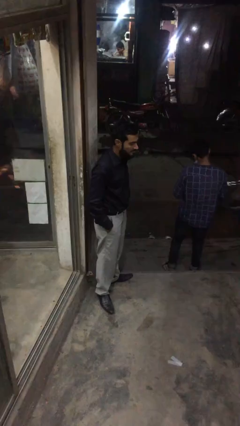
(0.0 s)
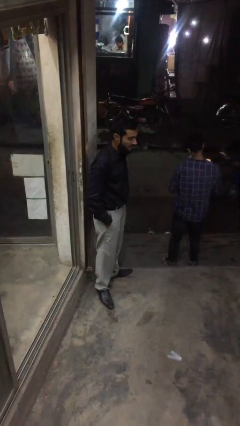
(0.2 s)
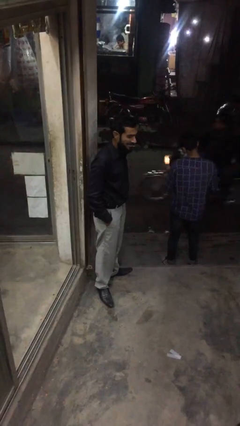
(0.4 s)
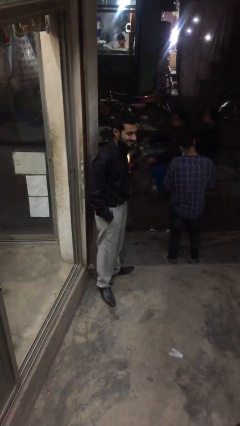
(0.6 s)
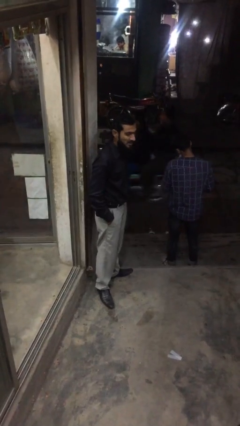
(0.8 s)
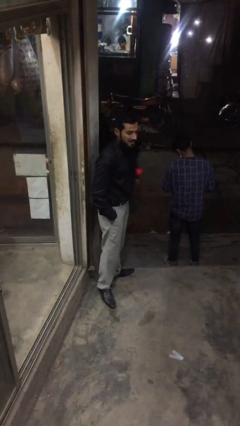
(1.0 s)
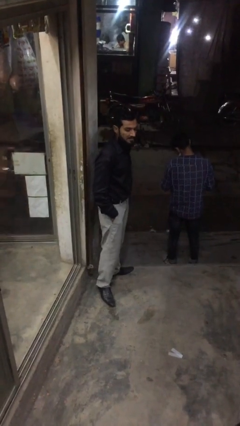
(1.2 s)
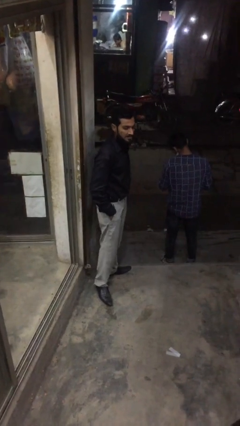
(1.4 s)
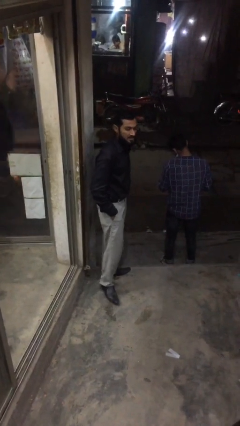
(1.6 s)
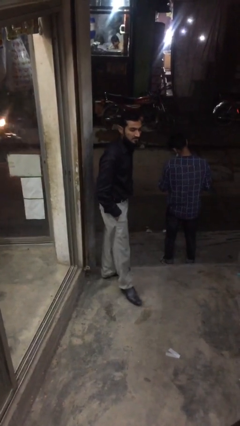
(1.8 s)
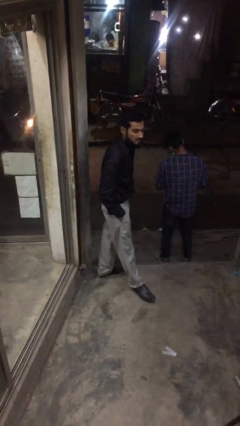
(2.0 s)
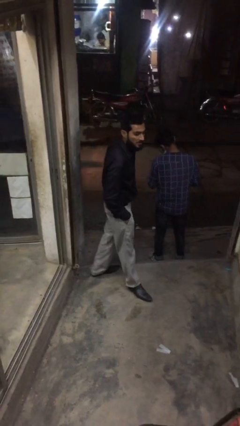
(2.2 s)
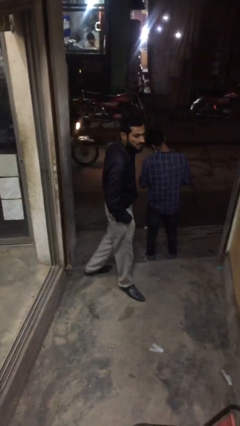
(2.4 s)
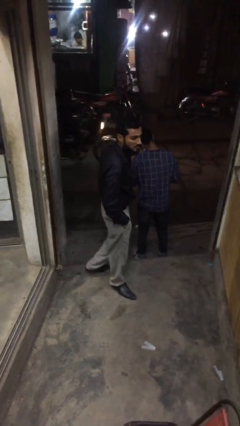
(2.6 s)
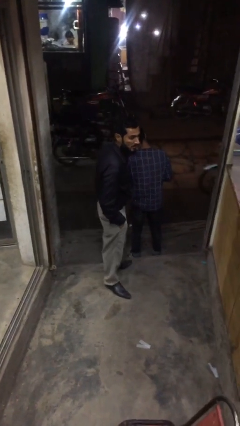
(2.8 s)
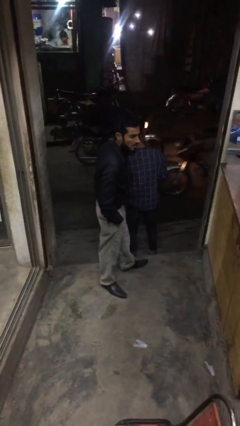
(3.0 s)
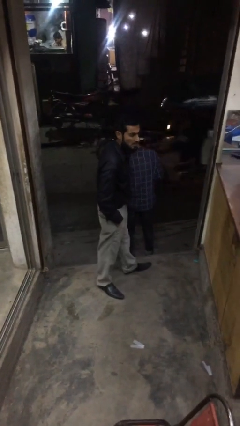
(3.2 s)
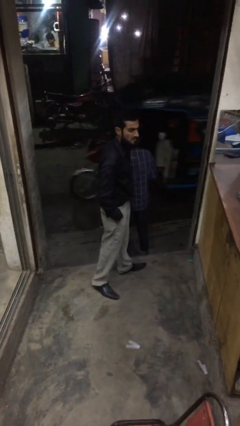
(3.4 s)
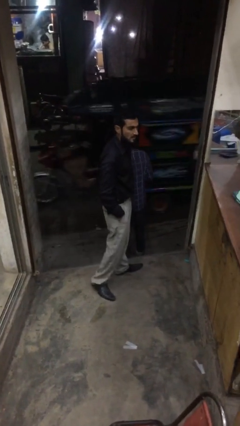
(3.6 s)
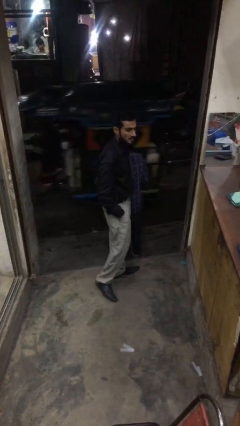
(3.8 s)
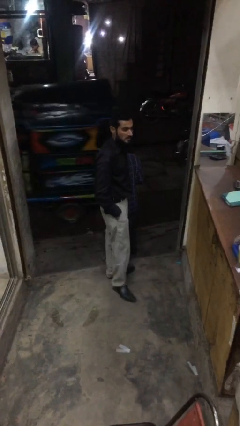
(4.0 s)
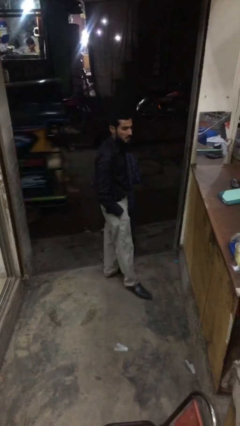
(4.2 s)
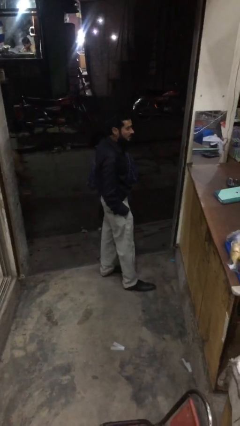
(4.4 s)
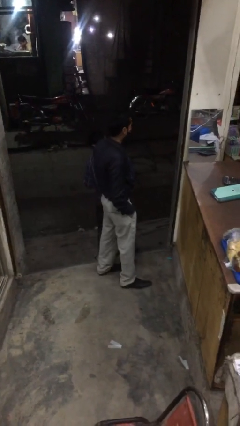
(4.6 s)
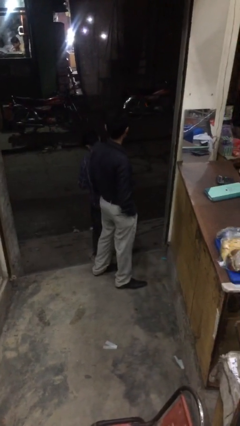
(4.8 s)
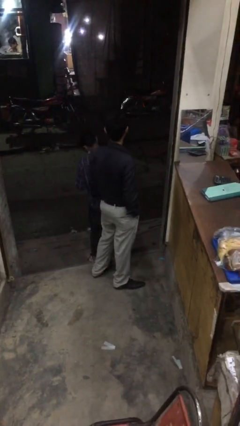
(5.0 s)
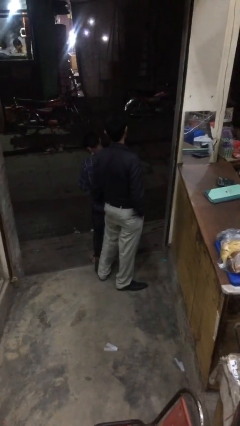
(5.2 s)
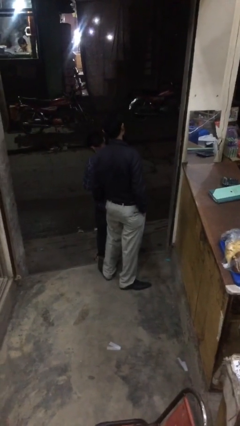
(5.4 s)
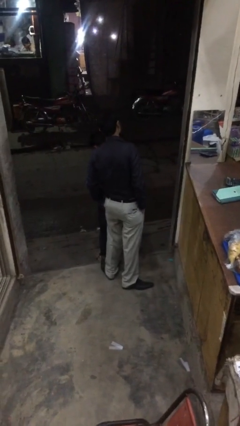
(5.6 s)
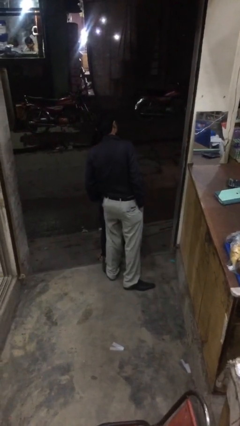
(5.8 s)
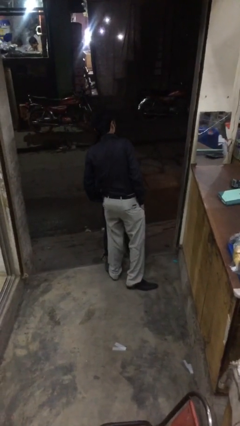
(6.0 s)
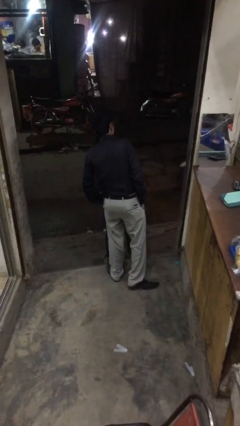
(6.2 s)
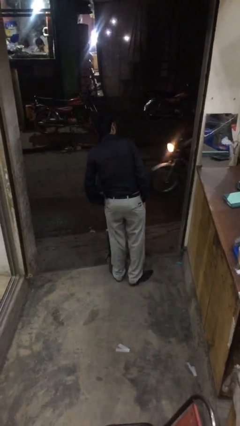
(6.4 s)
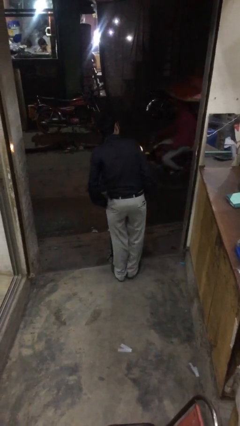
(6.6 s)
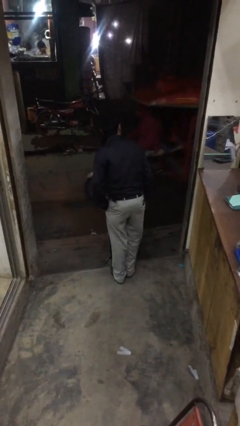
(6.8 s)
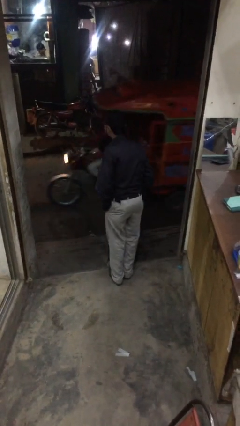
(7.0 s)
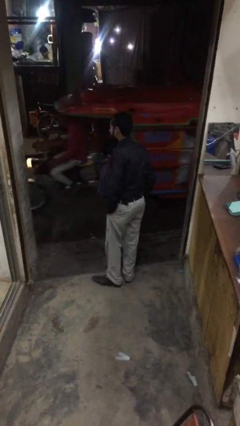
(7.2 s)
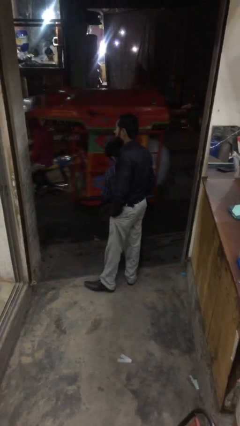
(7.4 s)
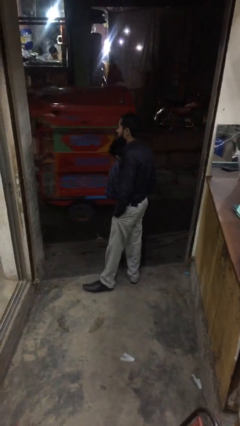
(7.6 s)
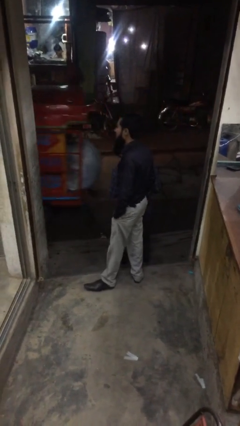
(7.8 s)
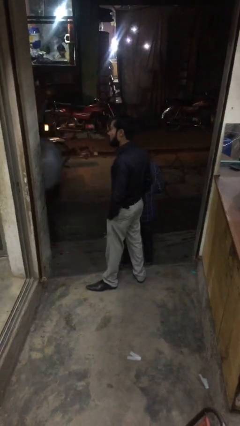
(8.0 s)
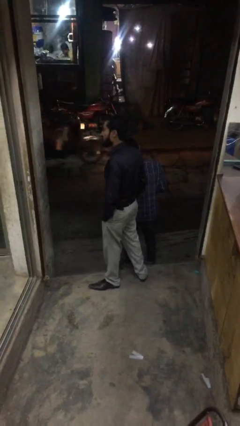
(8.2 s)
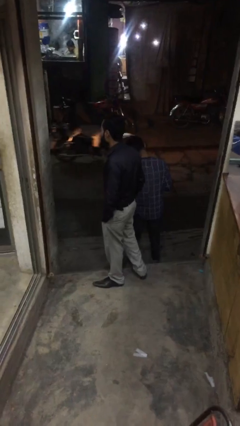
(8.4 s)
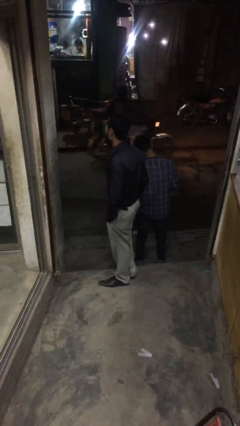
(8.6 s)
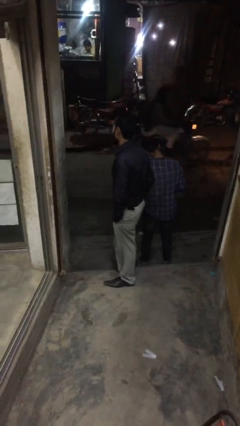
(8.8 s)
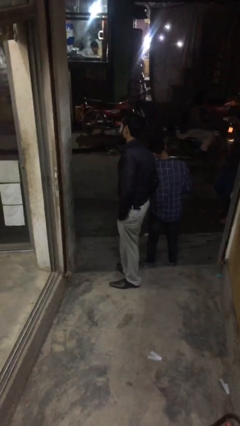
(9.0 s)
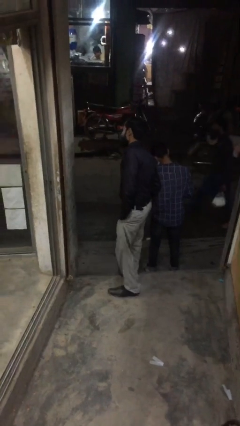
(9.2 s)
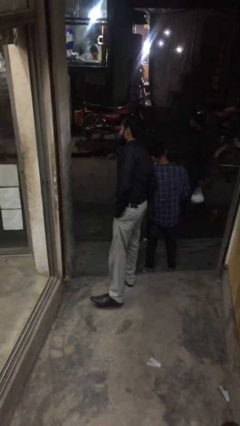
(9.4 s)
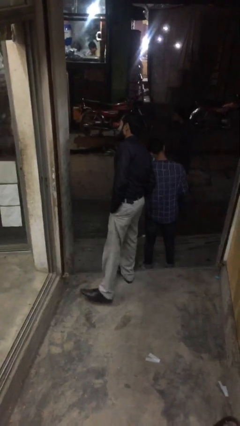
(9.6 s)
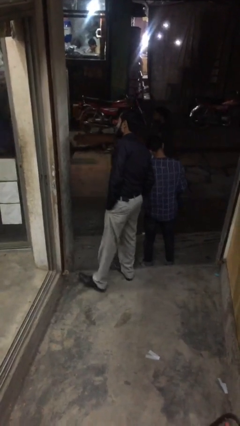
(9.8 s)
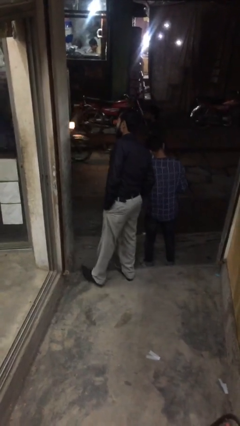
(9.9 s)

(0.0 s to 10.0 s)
person walks

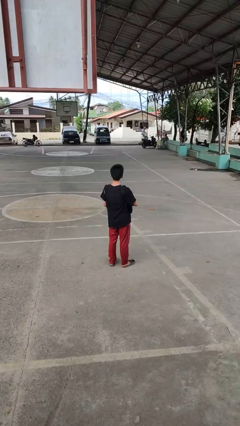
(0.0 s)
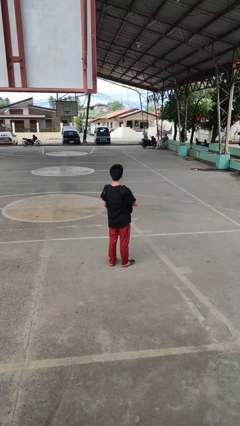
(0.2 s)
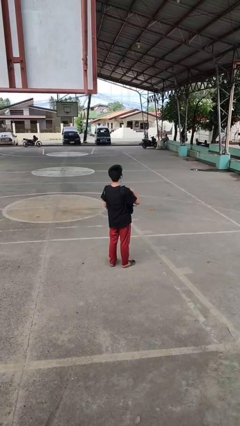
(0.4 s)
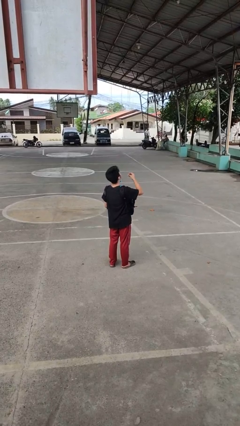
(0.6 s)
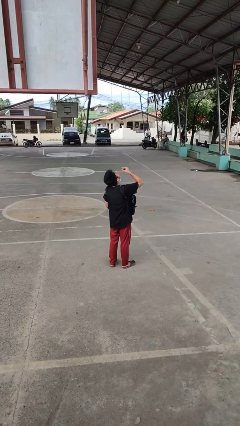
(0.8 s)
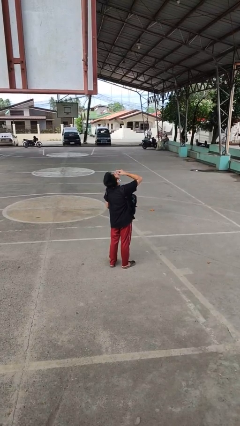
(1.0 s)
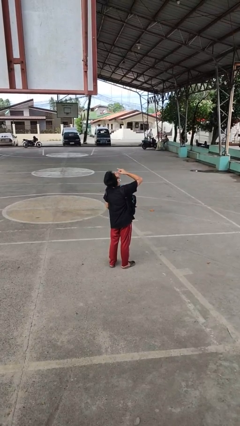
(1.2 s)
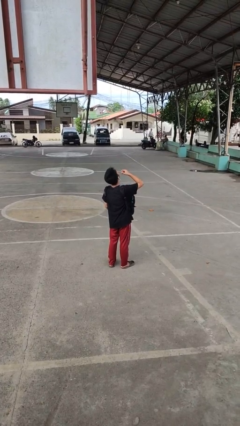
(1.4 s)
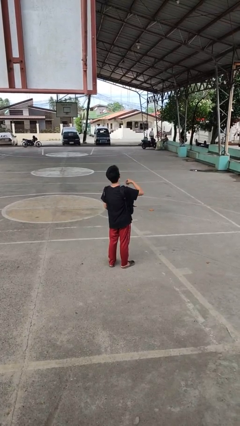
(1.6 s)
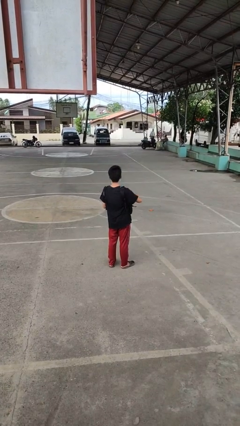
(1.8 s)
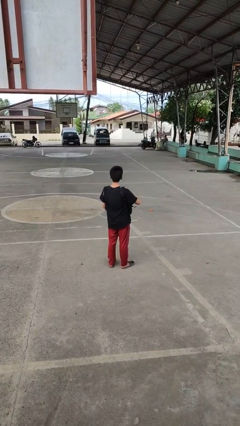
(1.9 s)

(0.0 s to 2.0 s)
person eats snack from bag

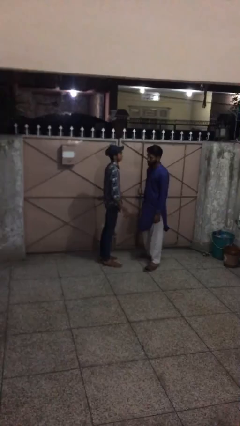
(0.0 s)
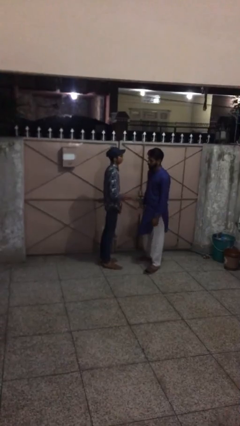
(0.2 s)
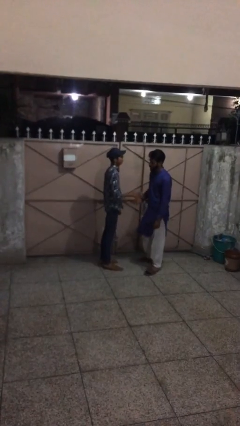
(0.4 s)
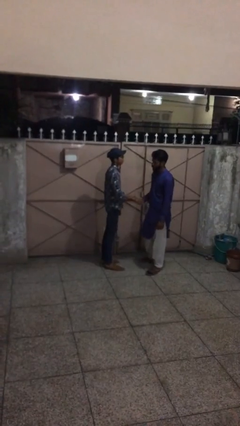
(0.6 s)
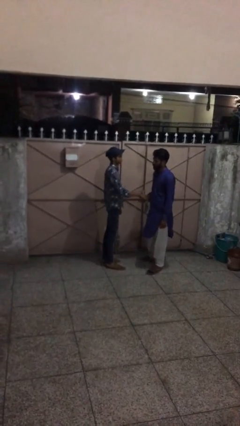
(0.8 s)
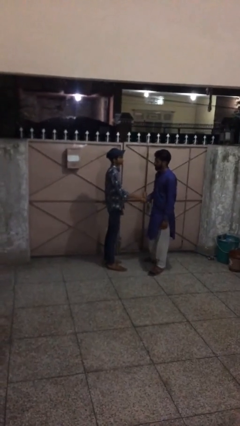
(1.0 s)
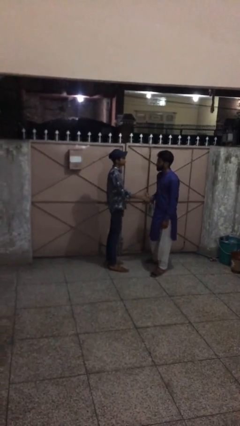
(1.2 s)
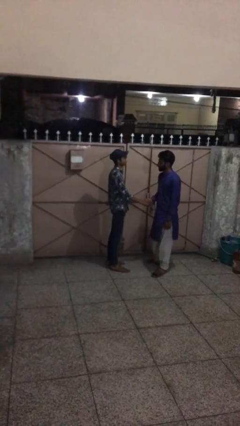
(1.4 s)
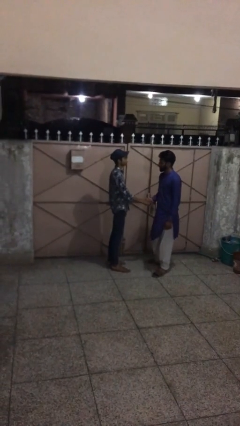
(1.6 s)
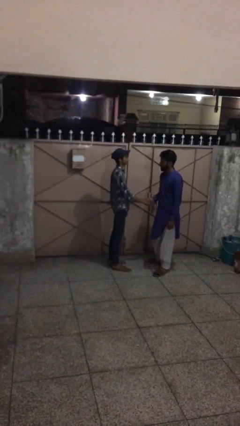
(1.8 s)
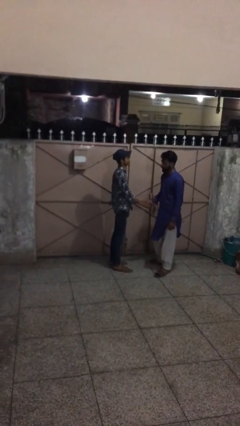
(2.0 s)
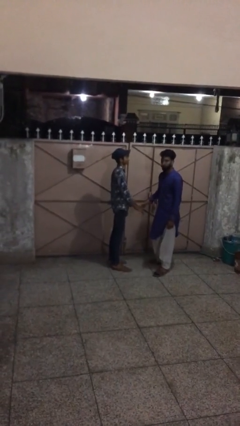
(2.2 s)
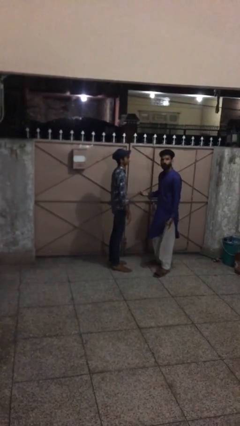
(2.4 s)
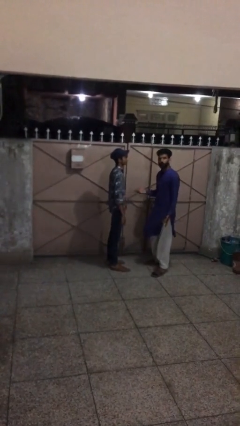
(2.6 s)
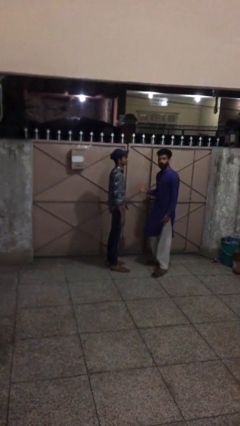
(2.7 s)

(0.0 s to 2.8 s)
person shakes hand

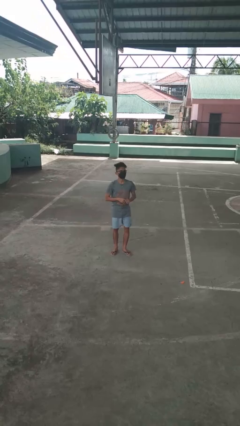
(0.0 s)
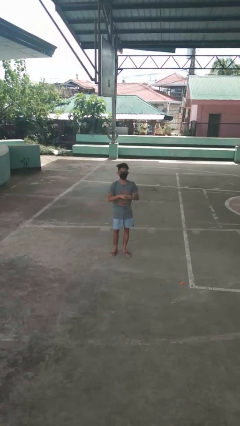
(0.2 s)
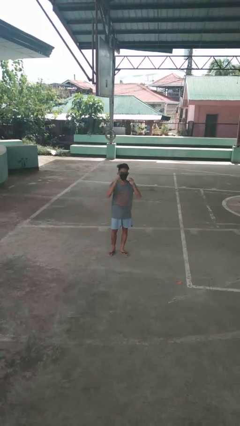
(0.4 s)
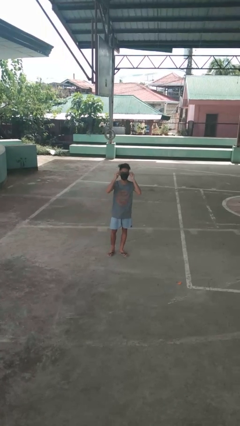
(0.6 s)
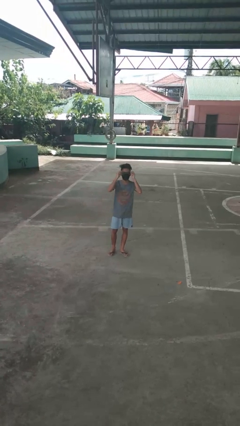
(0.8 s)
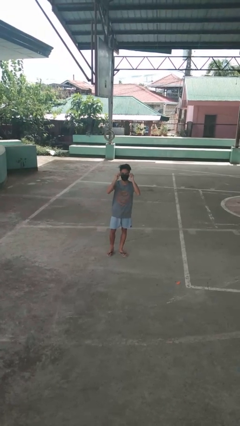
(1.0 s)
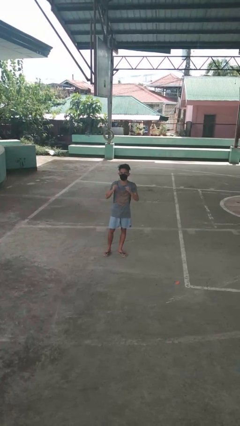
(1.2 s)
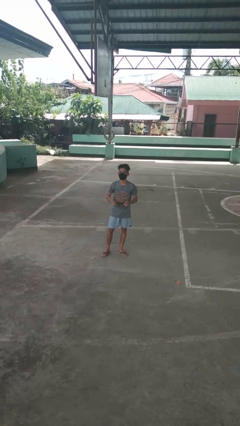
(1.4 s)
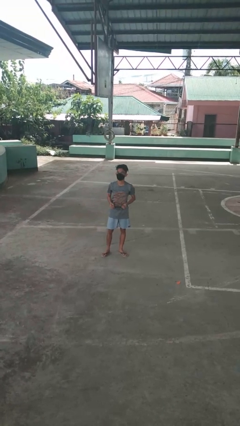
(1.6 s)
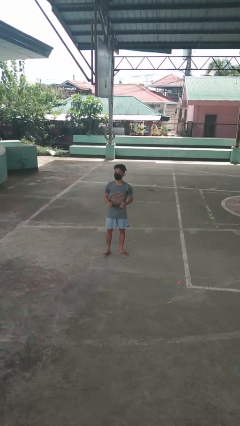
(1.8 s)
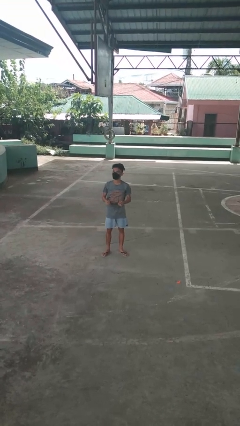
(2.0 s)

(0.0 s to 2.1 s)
person takes off glasses

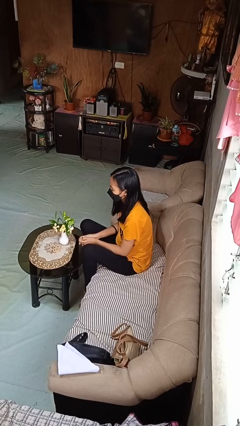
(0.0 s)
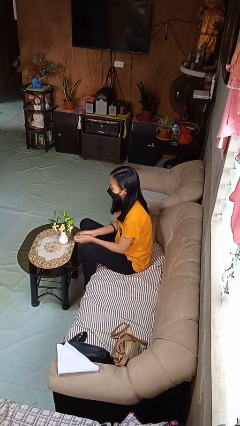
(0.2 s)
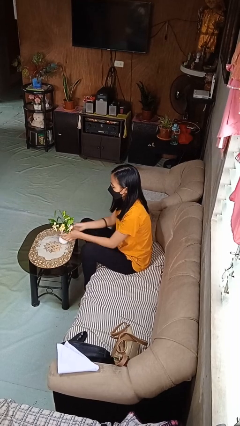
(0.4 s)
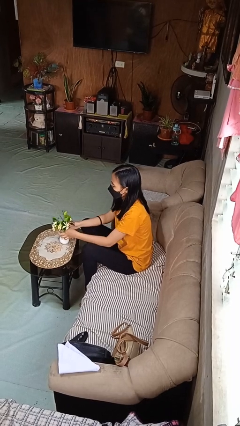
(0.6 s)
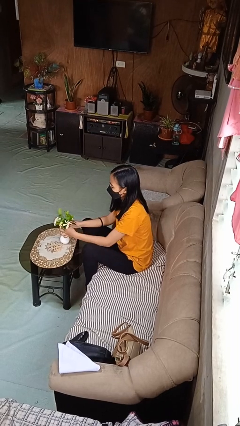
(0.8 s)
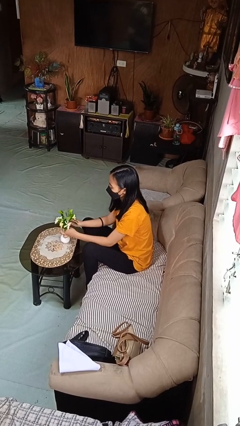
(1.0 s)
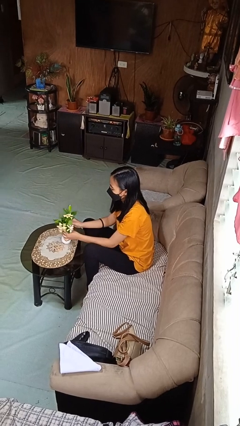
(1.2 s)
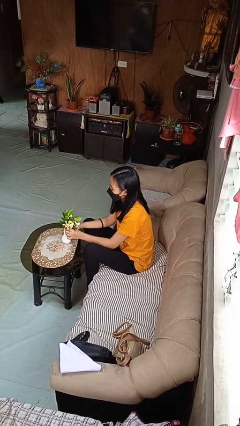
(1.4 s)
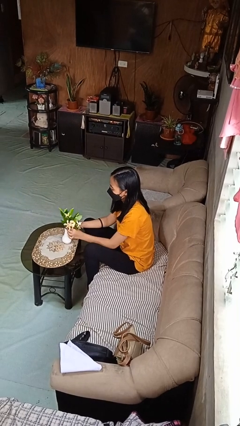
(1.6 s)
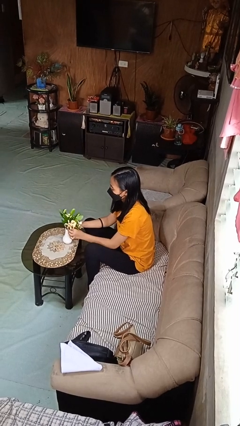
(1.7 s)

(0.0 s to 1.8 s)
person arranges flowers in vase
